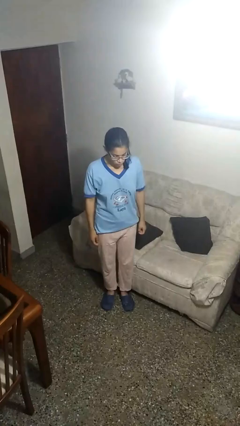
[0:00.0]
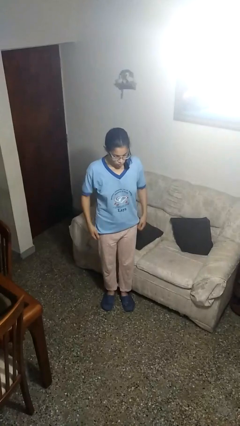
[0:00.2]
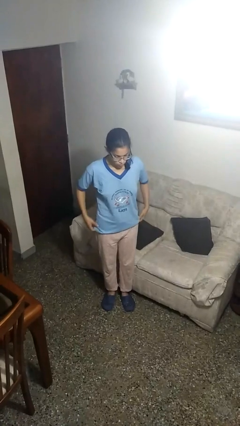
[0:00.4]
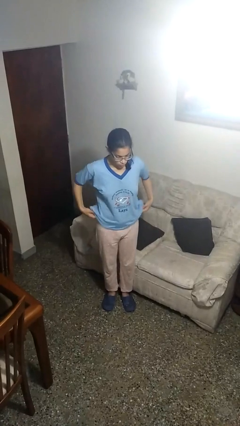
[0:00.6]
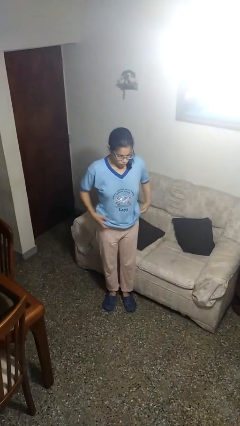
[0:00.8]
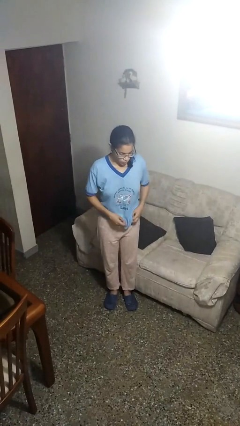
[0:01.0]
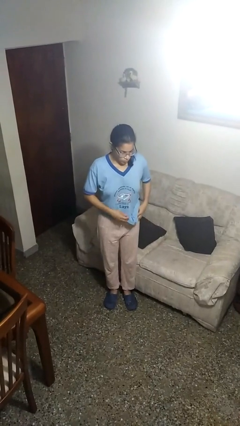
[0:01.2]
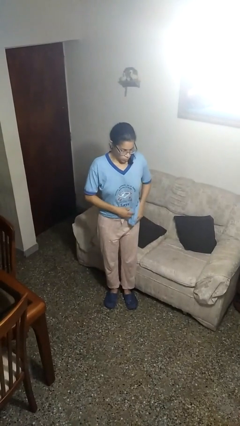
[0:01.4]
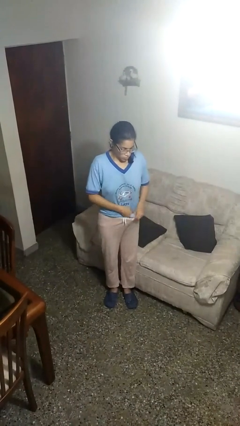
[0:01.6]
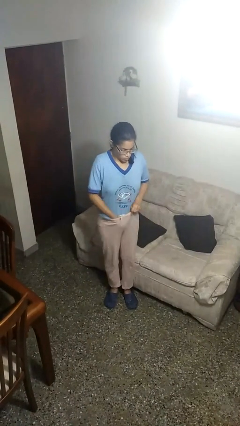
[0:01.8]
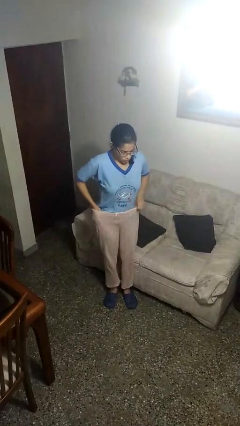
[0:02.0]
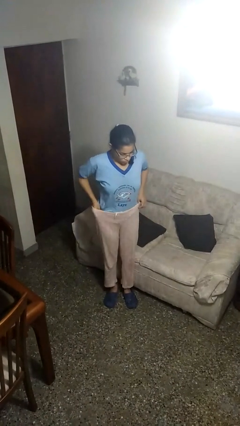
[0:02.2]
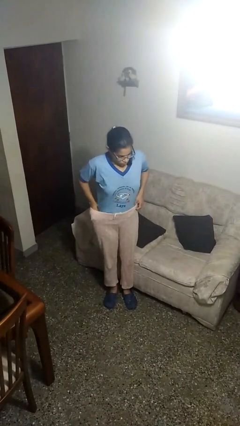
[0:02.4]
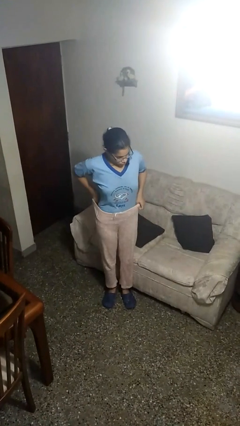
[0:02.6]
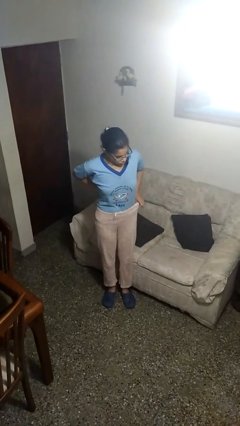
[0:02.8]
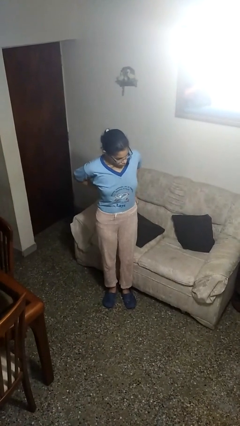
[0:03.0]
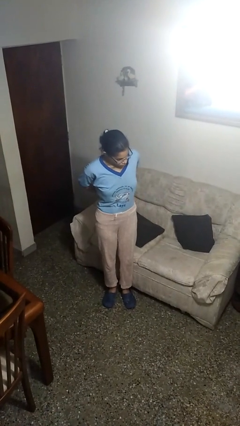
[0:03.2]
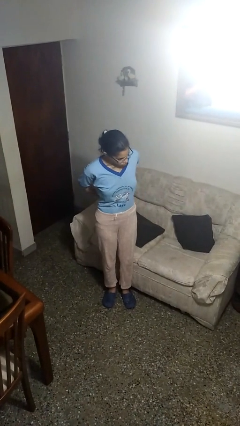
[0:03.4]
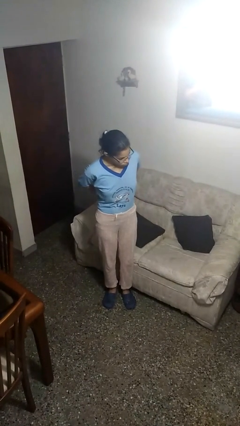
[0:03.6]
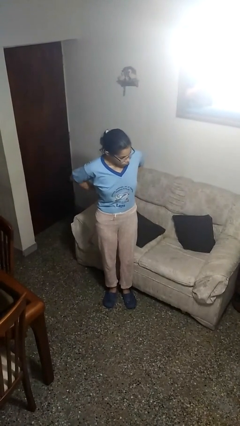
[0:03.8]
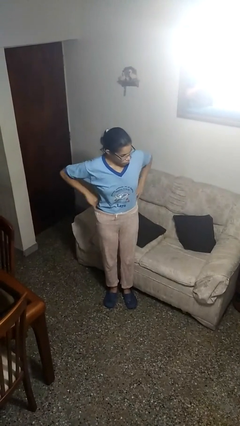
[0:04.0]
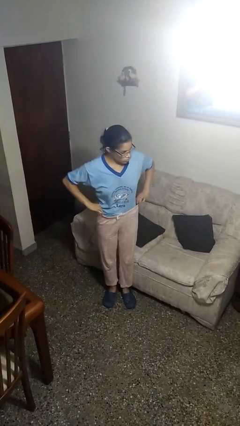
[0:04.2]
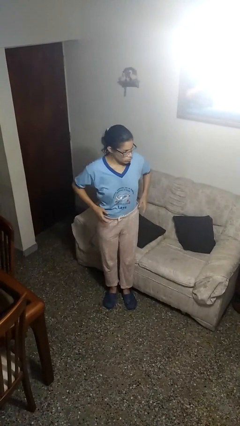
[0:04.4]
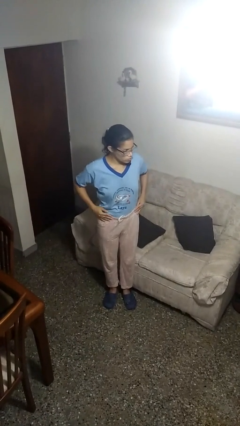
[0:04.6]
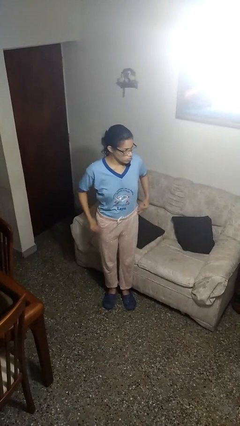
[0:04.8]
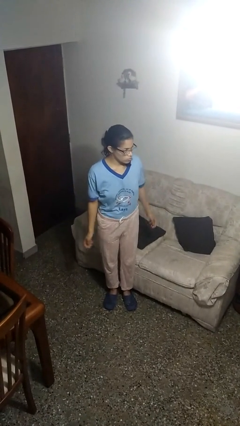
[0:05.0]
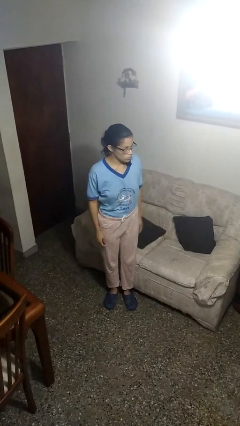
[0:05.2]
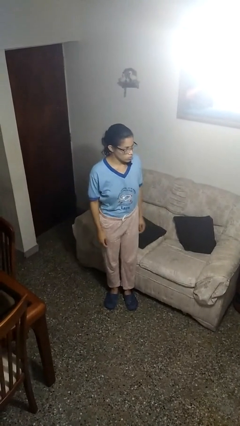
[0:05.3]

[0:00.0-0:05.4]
person tucks in shirt

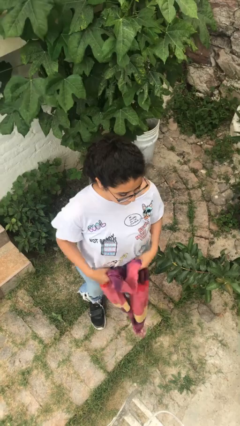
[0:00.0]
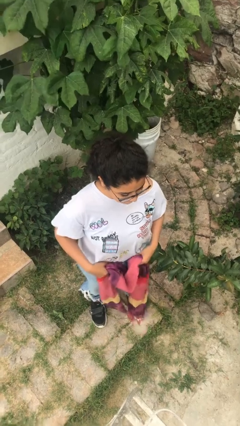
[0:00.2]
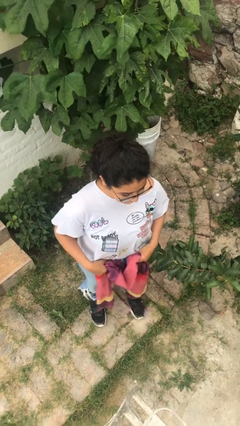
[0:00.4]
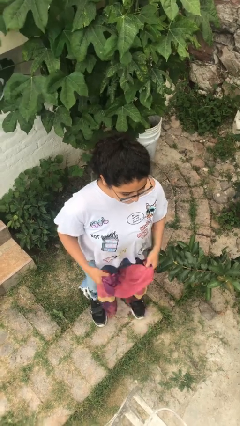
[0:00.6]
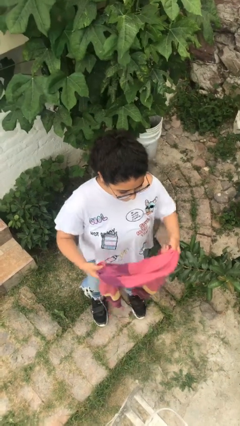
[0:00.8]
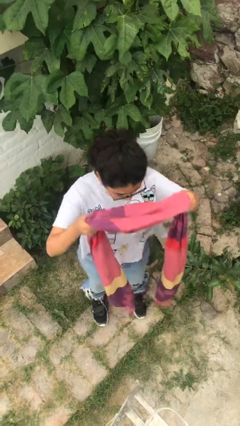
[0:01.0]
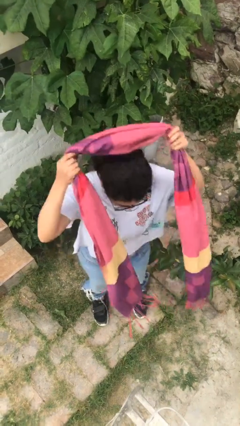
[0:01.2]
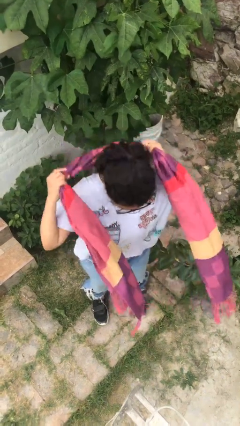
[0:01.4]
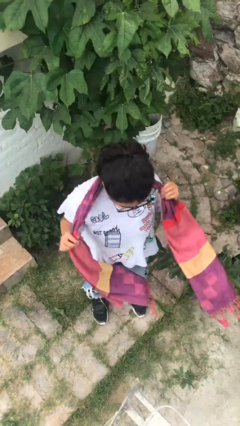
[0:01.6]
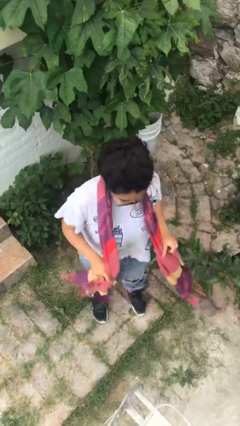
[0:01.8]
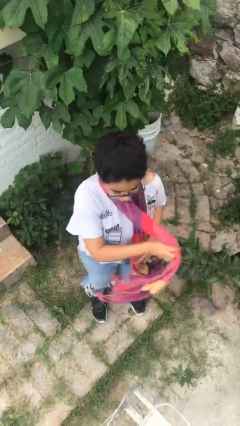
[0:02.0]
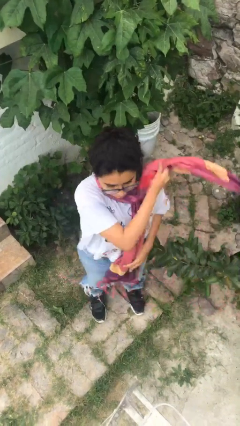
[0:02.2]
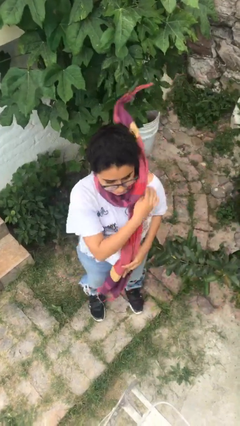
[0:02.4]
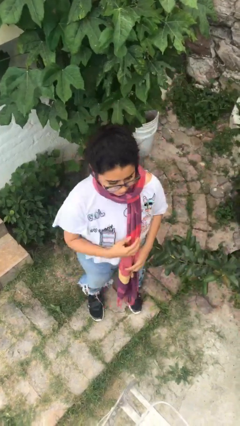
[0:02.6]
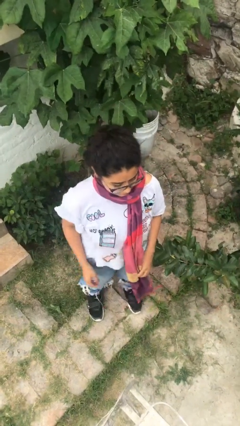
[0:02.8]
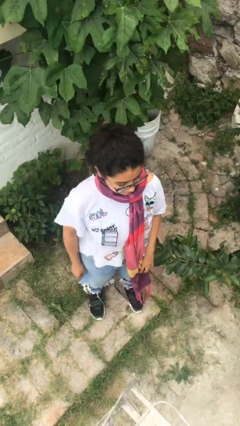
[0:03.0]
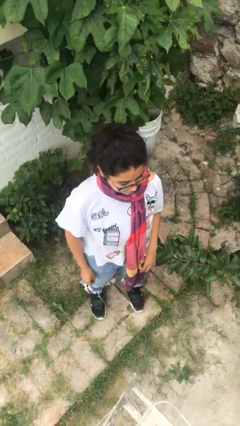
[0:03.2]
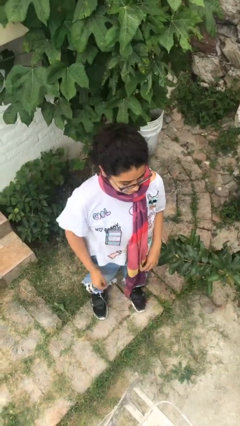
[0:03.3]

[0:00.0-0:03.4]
person puts on scarf

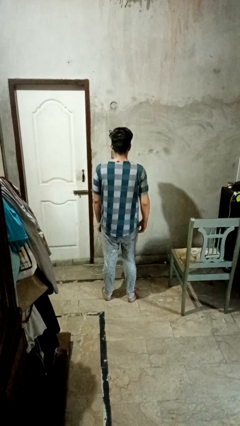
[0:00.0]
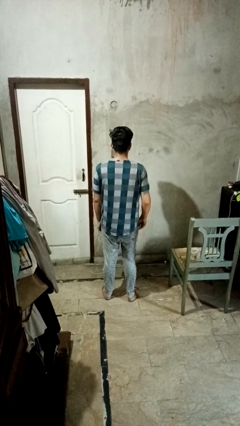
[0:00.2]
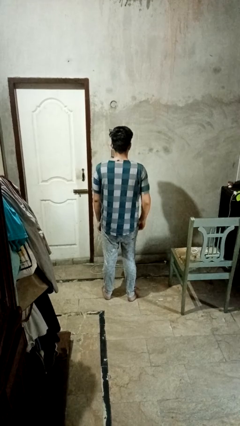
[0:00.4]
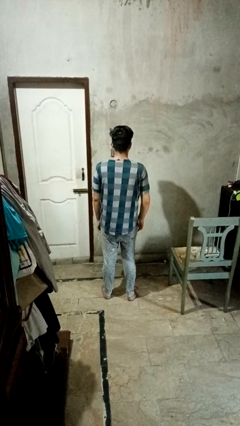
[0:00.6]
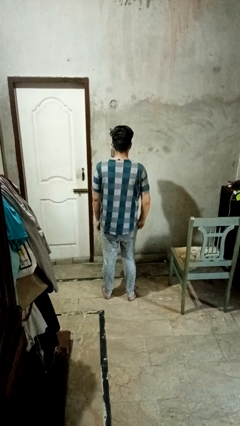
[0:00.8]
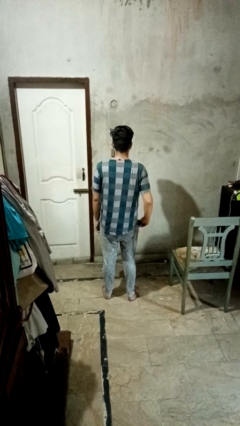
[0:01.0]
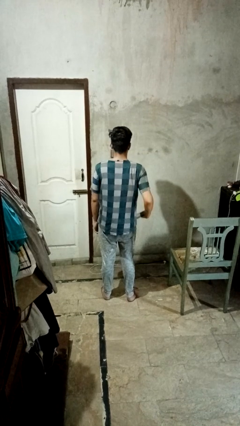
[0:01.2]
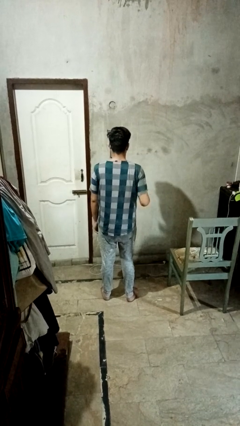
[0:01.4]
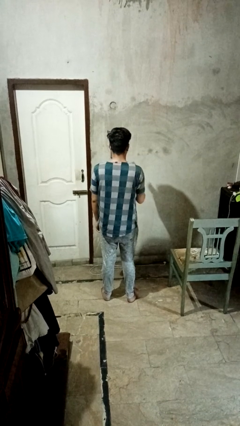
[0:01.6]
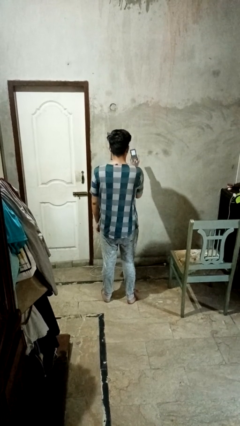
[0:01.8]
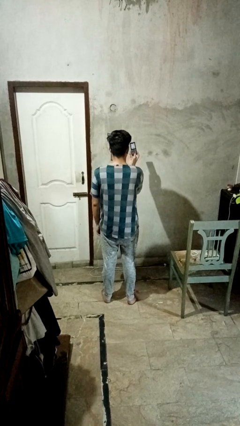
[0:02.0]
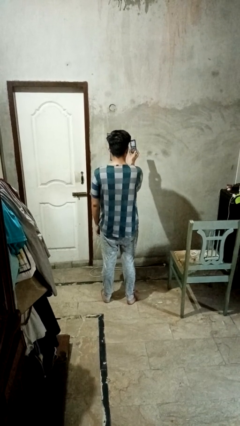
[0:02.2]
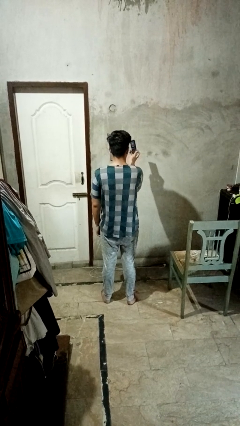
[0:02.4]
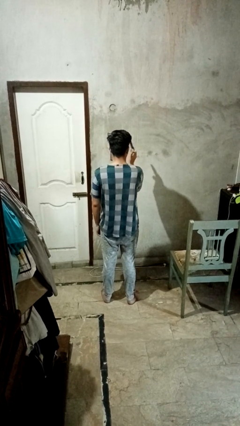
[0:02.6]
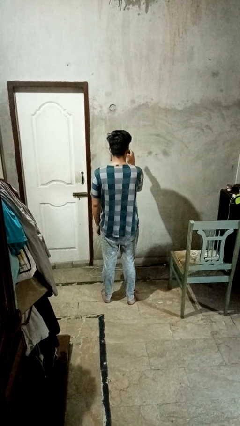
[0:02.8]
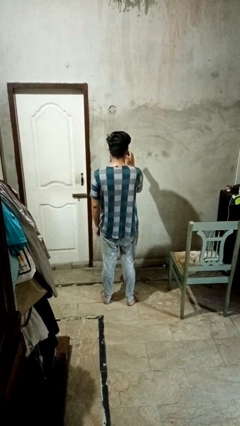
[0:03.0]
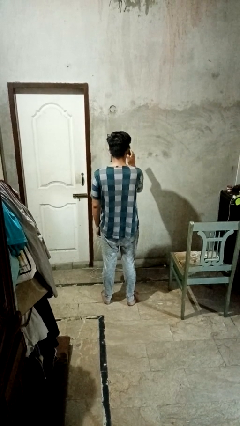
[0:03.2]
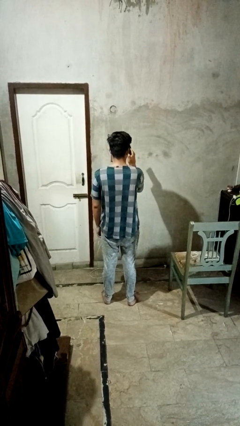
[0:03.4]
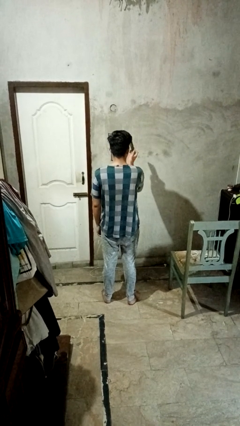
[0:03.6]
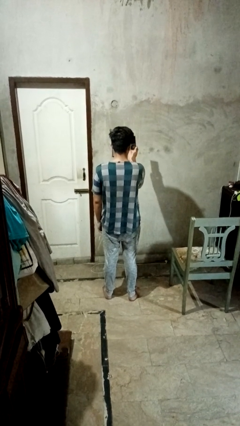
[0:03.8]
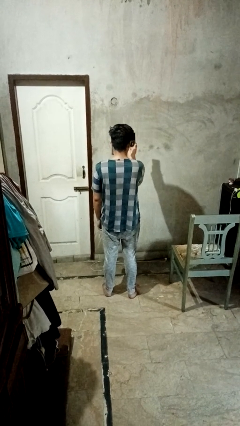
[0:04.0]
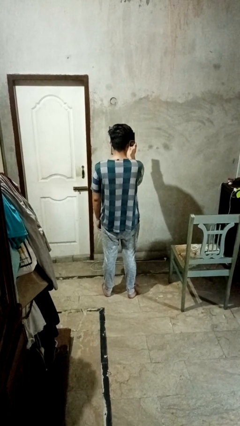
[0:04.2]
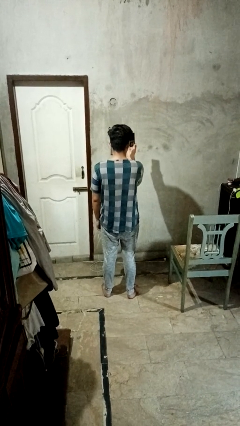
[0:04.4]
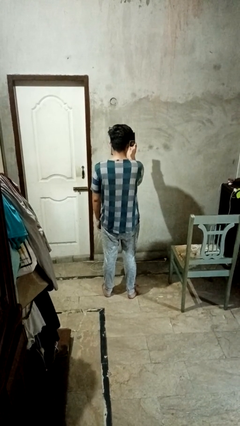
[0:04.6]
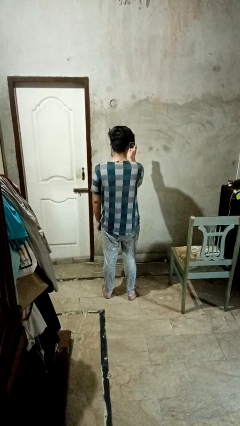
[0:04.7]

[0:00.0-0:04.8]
person takes phone from pocket

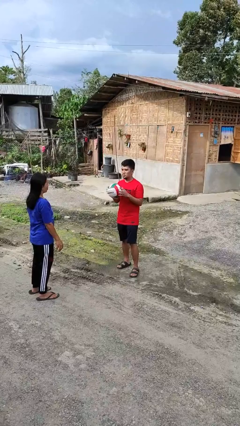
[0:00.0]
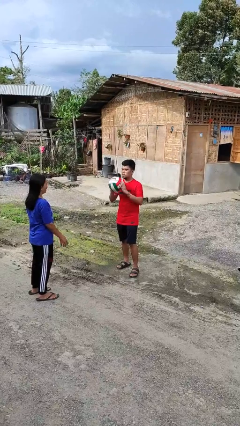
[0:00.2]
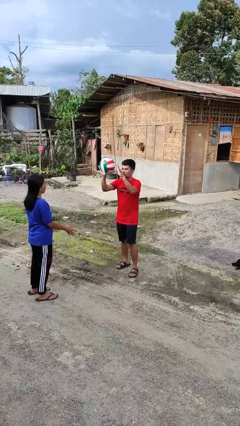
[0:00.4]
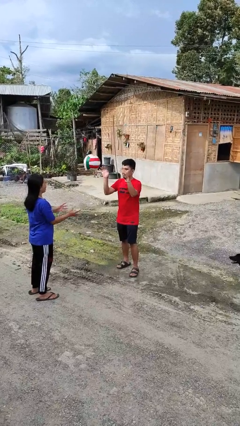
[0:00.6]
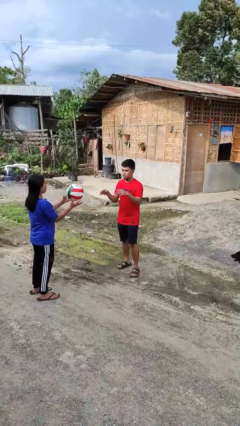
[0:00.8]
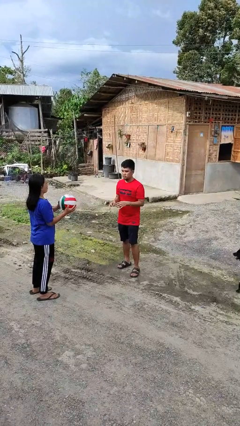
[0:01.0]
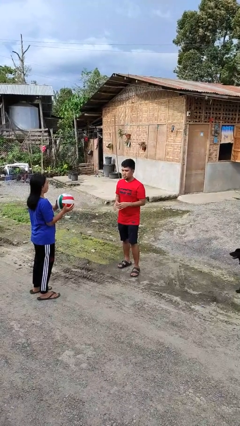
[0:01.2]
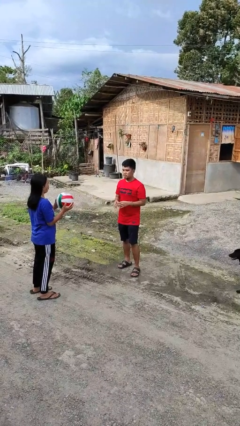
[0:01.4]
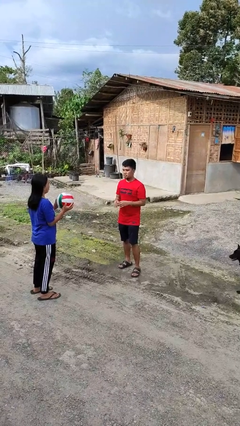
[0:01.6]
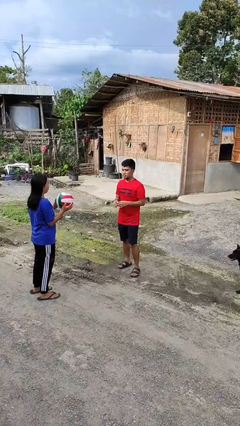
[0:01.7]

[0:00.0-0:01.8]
person throws object to person

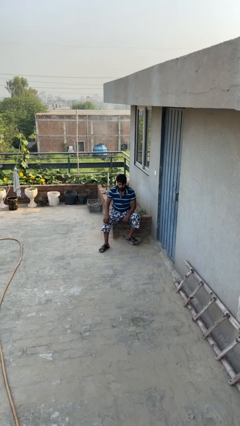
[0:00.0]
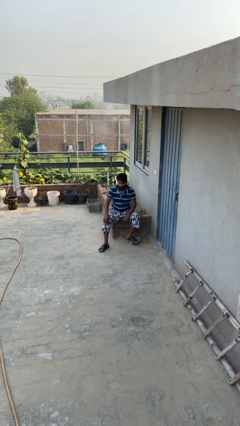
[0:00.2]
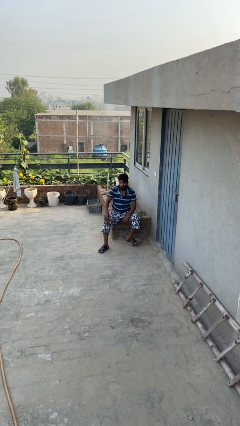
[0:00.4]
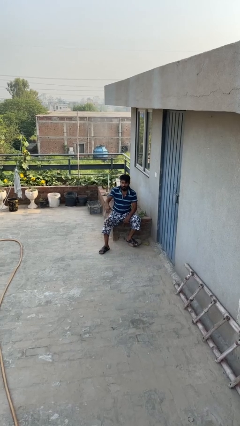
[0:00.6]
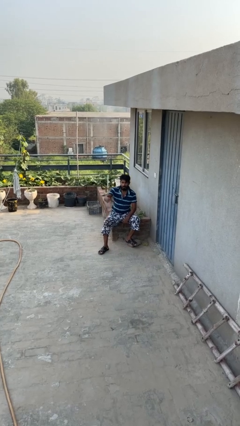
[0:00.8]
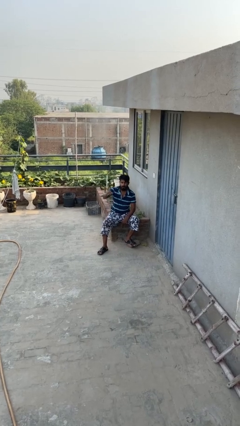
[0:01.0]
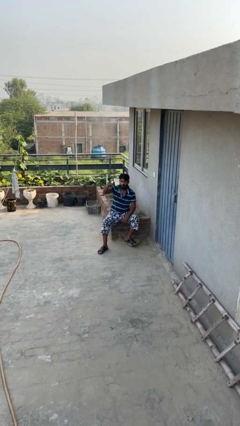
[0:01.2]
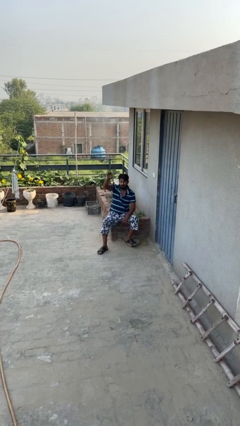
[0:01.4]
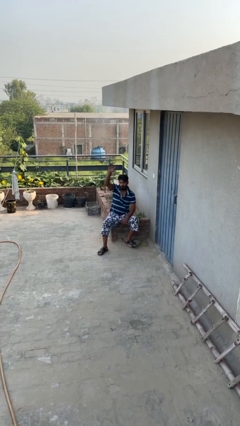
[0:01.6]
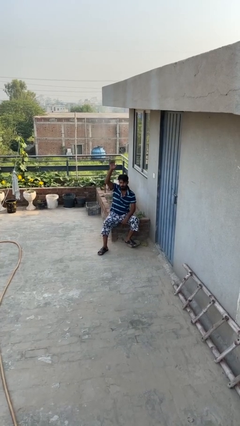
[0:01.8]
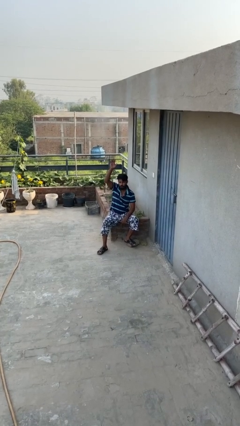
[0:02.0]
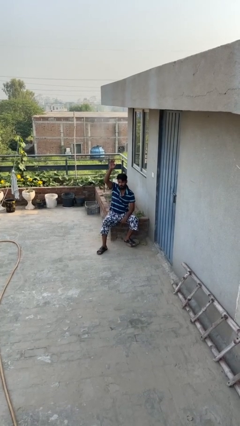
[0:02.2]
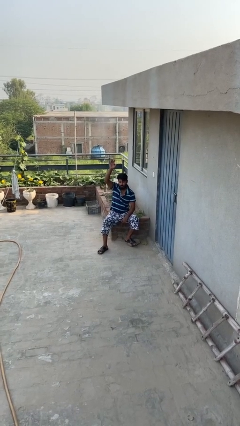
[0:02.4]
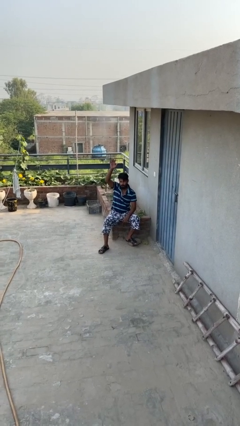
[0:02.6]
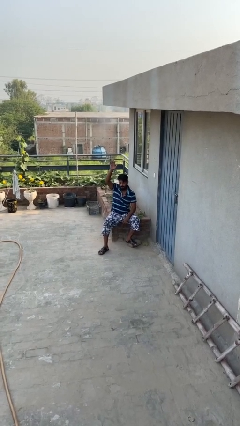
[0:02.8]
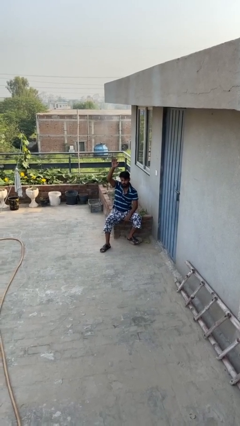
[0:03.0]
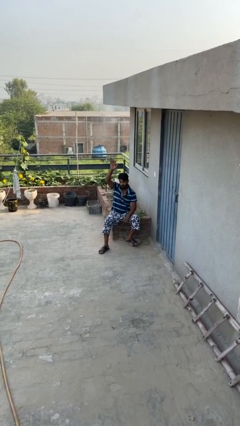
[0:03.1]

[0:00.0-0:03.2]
person gestures raise hand
